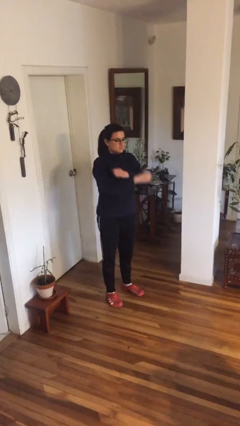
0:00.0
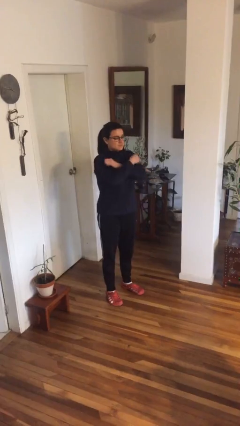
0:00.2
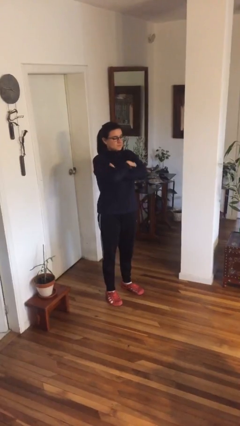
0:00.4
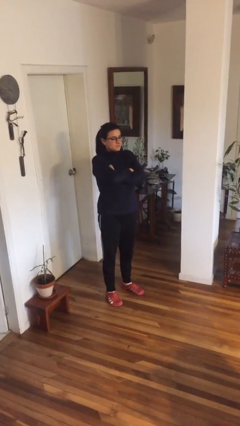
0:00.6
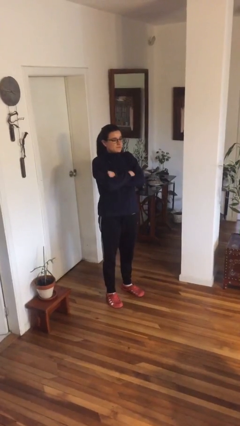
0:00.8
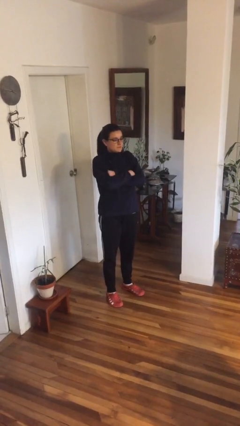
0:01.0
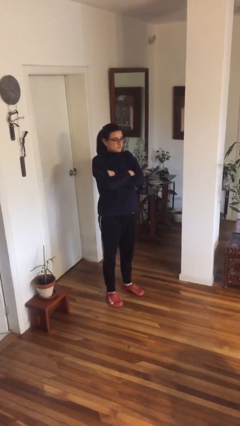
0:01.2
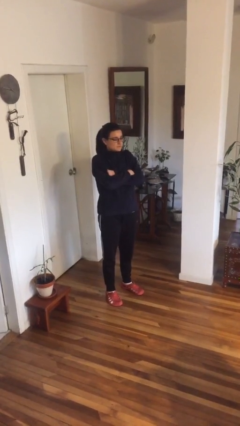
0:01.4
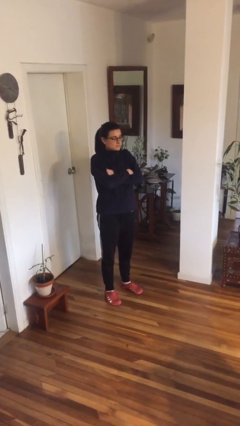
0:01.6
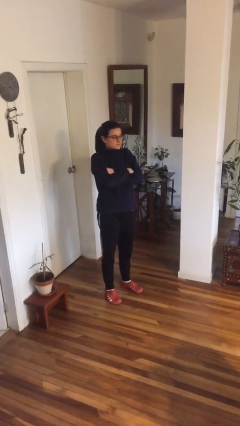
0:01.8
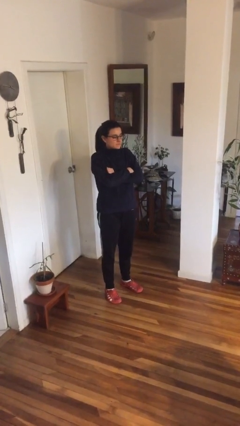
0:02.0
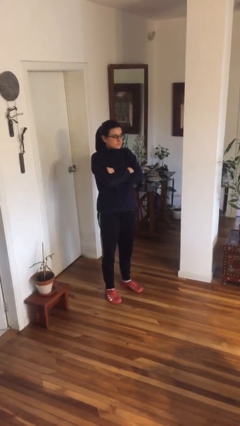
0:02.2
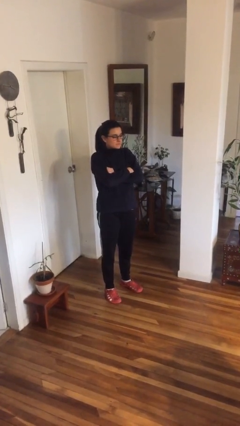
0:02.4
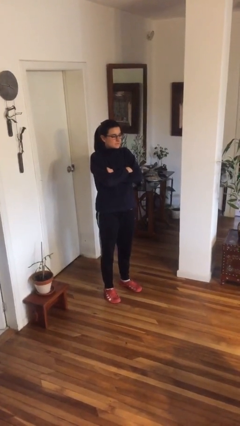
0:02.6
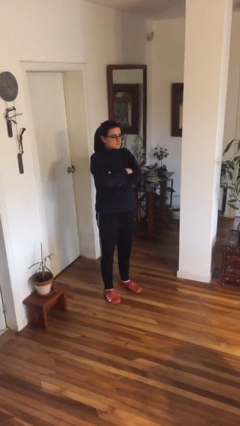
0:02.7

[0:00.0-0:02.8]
person crosses arms

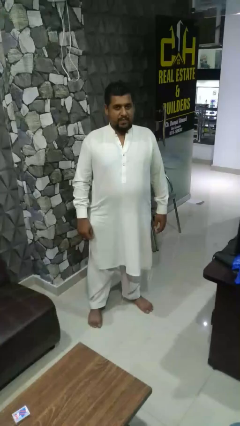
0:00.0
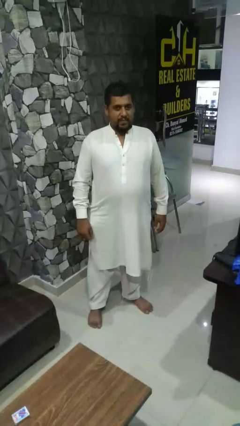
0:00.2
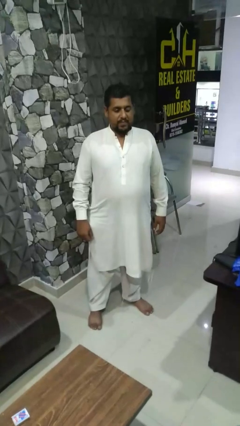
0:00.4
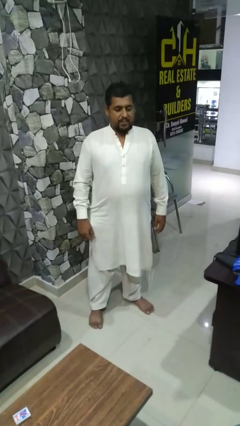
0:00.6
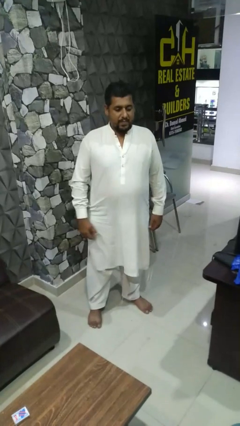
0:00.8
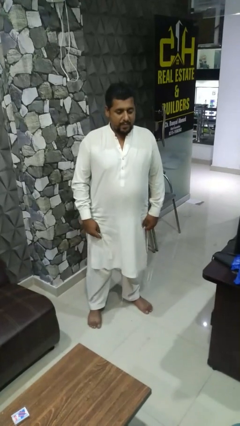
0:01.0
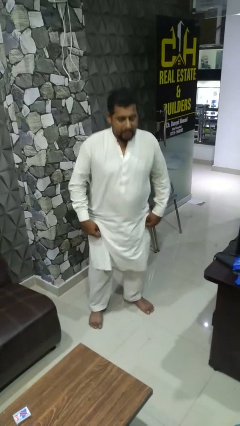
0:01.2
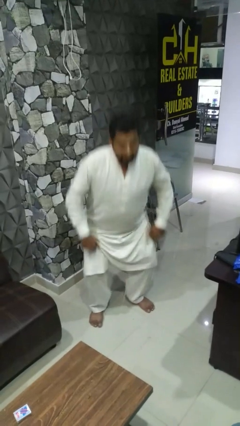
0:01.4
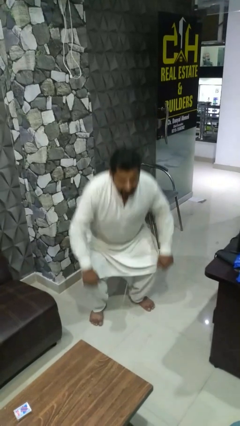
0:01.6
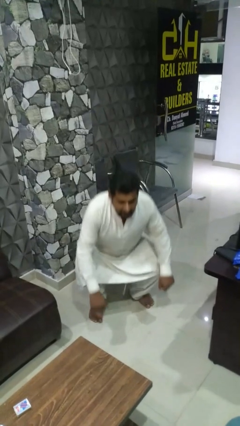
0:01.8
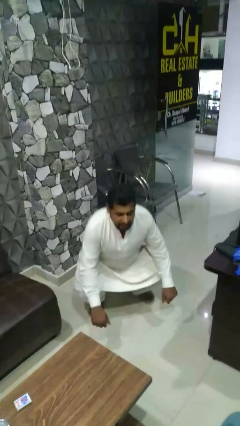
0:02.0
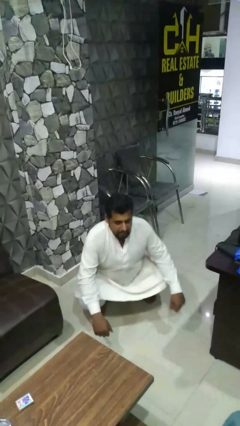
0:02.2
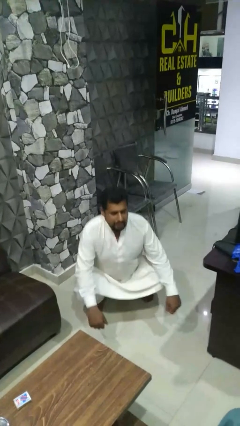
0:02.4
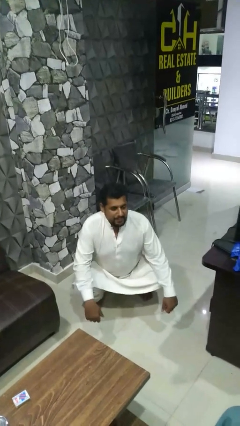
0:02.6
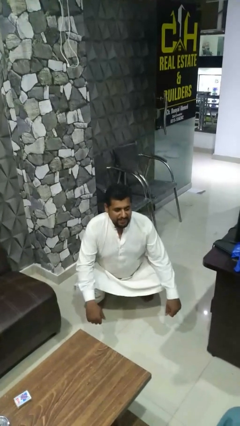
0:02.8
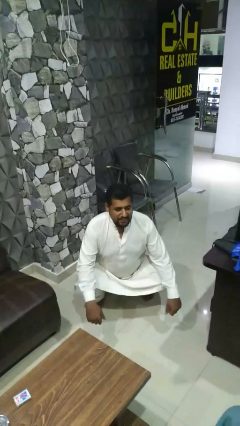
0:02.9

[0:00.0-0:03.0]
person squats

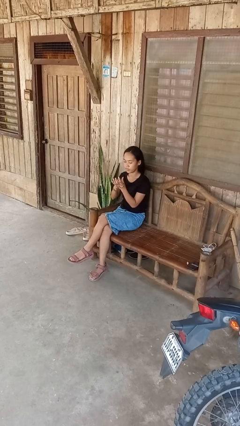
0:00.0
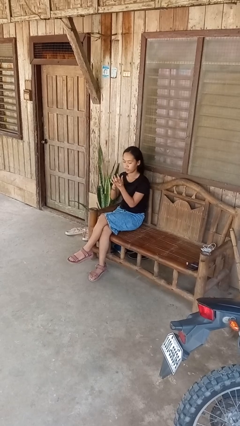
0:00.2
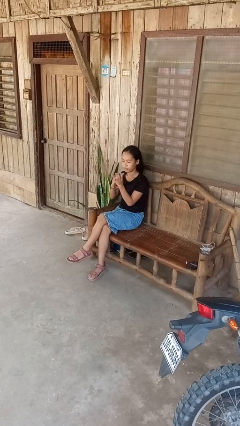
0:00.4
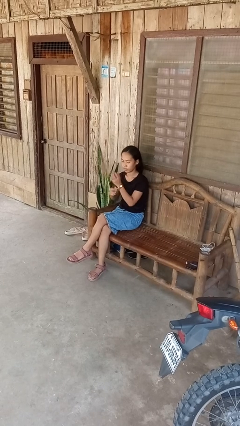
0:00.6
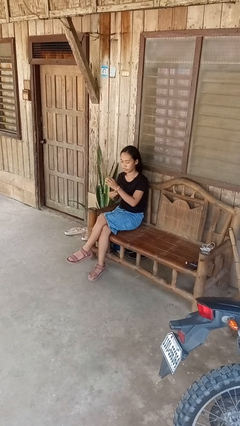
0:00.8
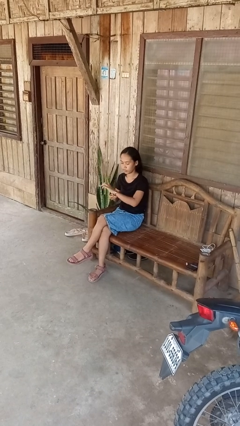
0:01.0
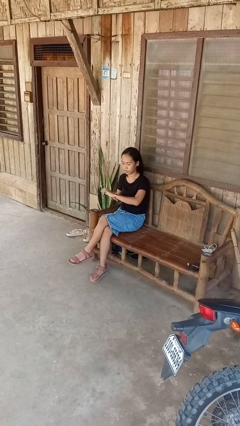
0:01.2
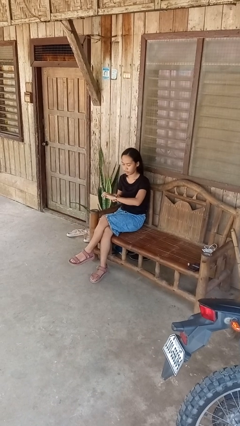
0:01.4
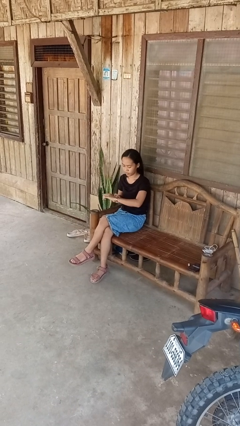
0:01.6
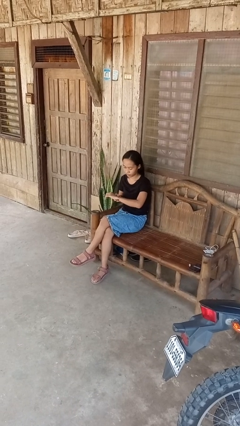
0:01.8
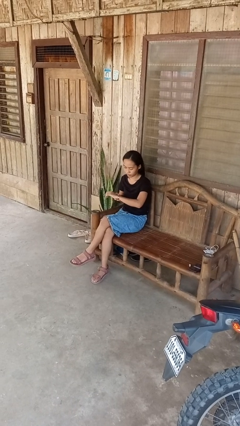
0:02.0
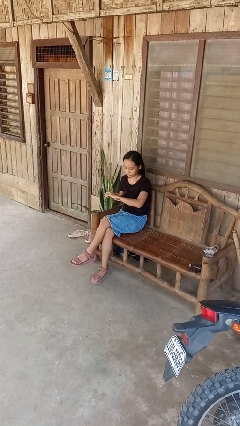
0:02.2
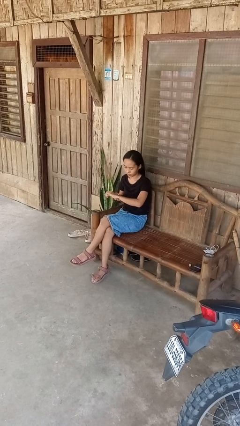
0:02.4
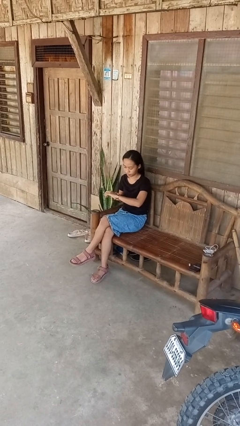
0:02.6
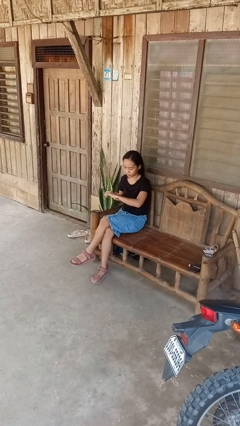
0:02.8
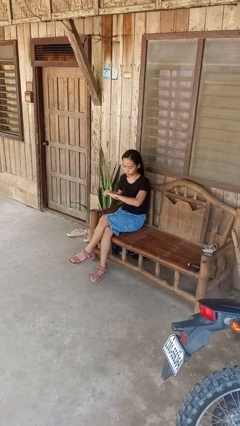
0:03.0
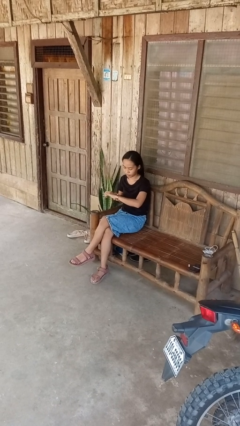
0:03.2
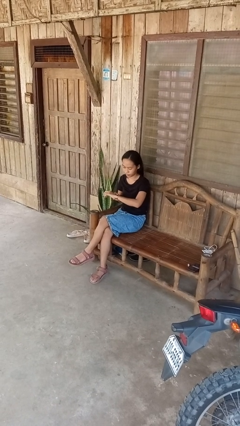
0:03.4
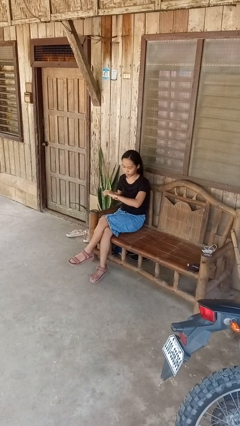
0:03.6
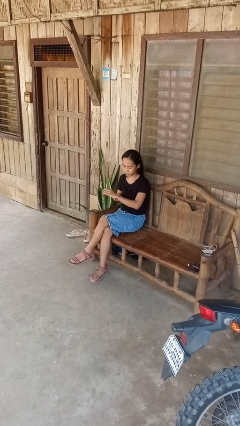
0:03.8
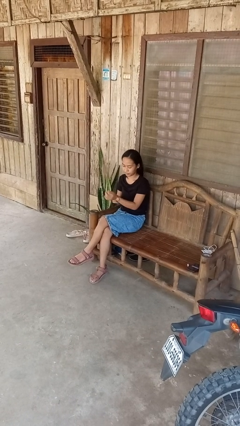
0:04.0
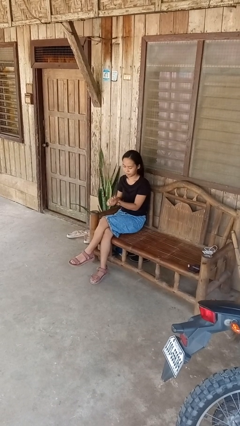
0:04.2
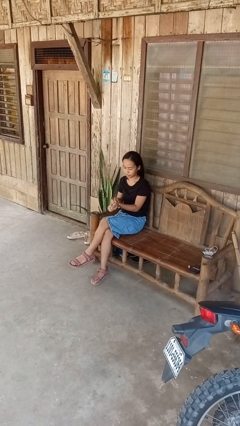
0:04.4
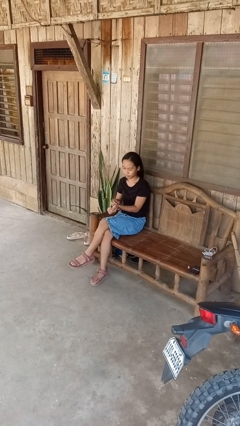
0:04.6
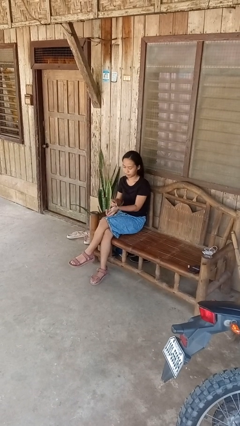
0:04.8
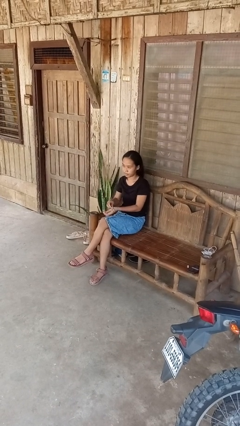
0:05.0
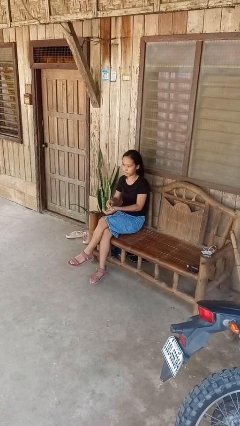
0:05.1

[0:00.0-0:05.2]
person puts on wristwatch

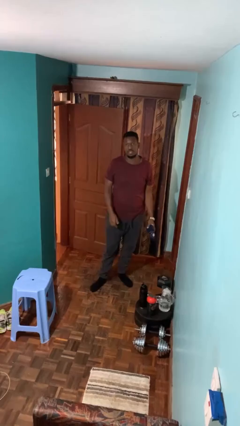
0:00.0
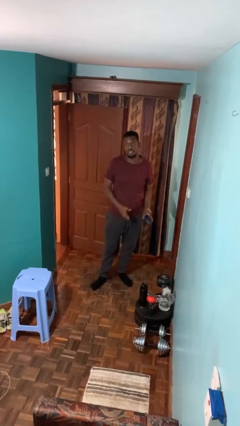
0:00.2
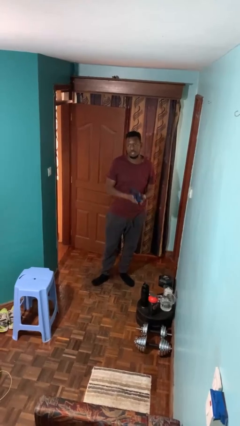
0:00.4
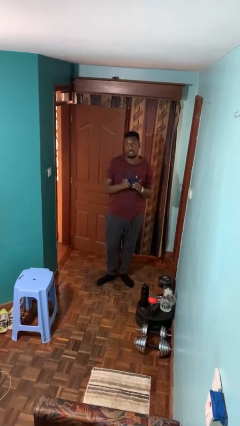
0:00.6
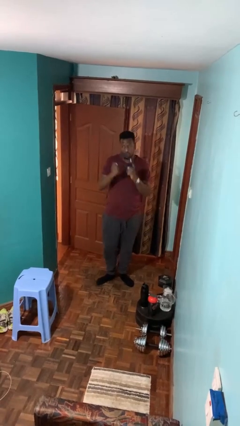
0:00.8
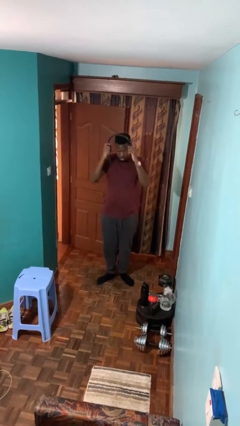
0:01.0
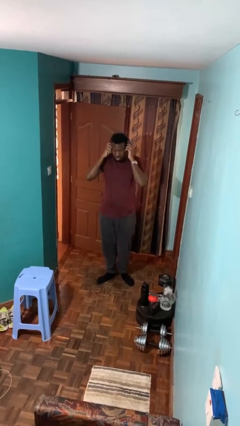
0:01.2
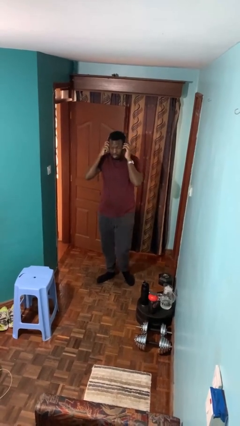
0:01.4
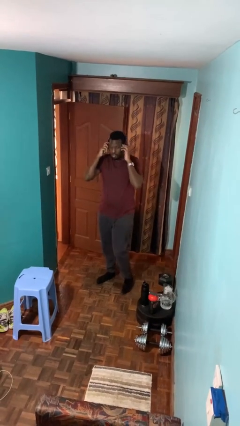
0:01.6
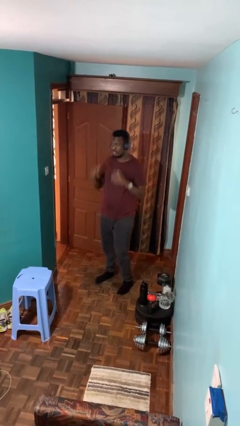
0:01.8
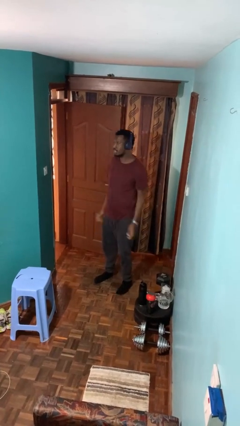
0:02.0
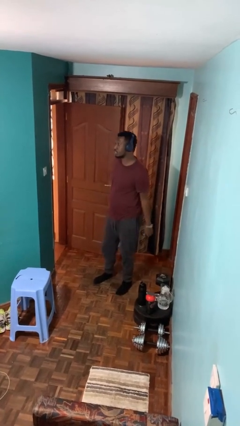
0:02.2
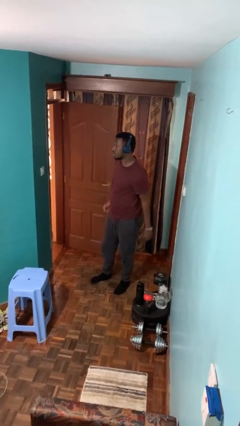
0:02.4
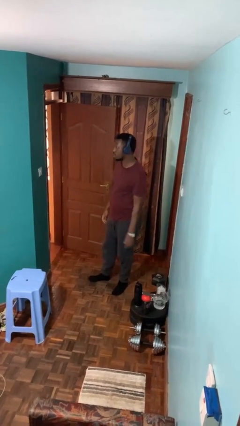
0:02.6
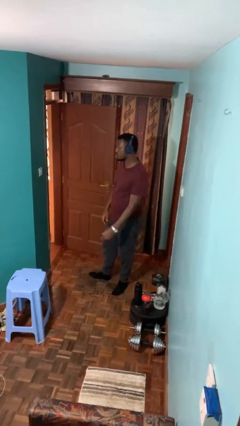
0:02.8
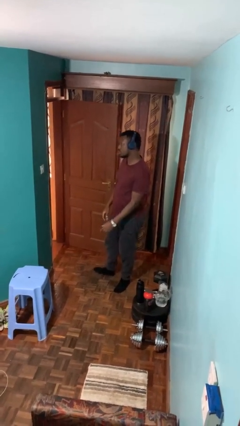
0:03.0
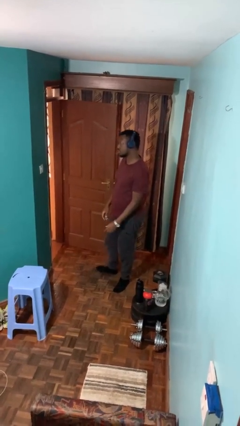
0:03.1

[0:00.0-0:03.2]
person puts on headphones

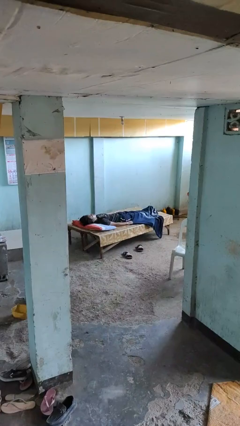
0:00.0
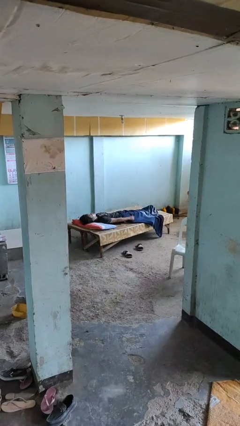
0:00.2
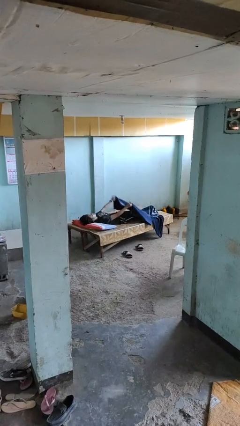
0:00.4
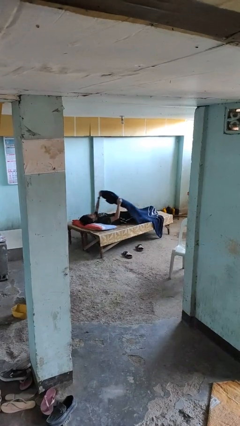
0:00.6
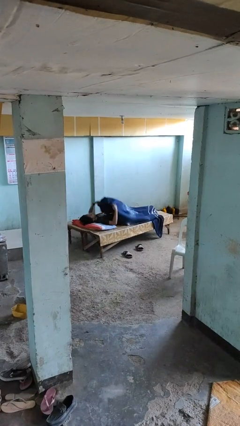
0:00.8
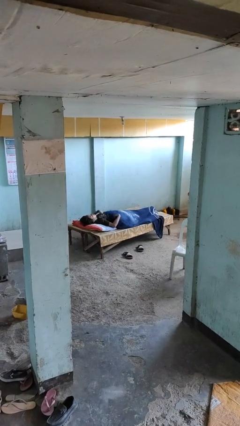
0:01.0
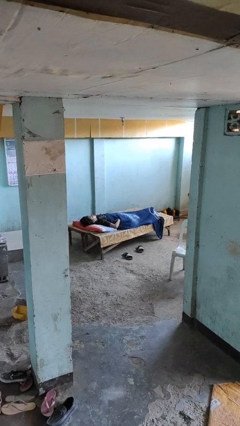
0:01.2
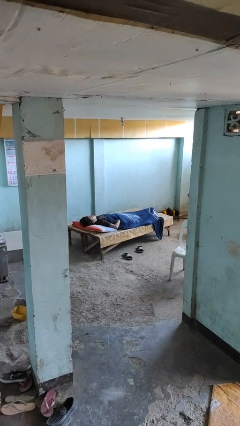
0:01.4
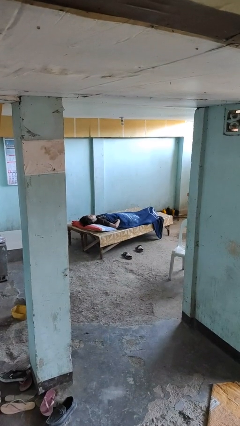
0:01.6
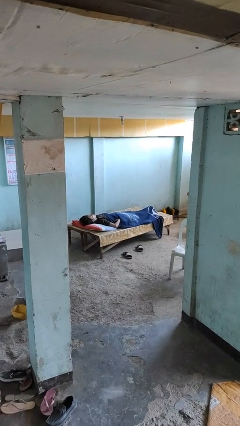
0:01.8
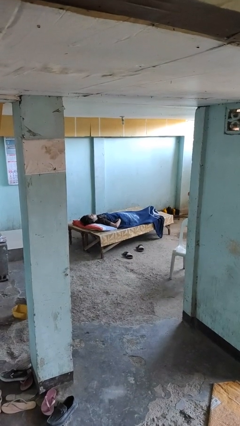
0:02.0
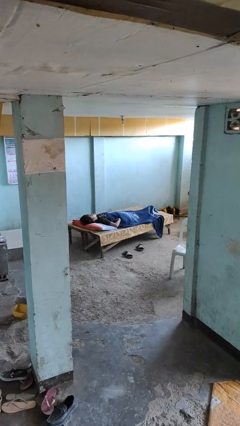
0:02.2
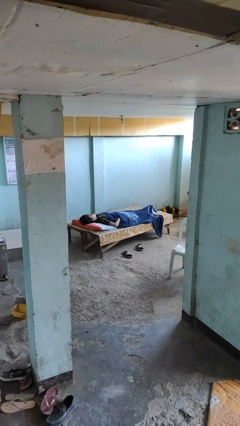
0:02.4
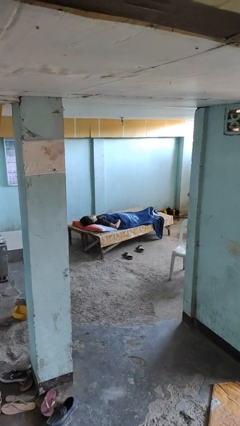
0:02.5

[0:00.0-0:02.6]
person covers with blanket

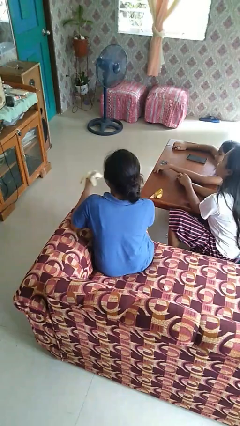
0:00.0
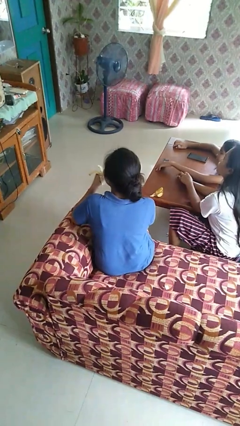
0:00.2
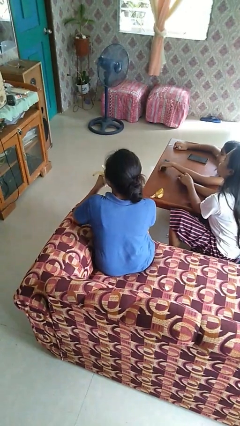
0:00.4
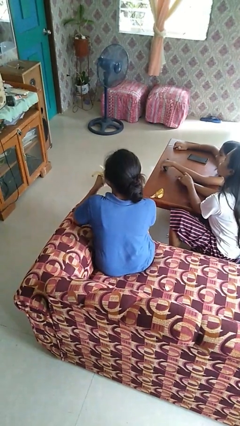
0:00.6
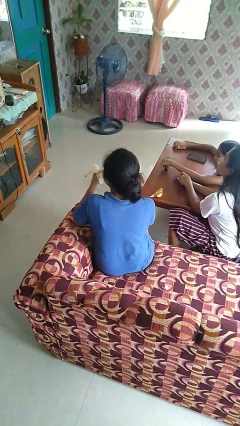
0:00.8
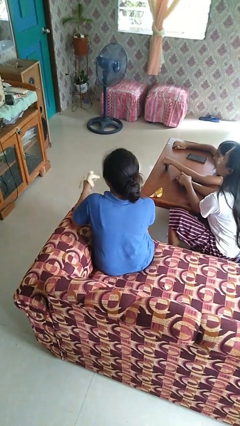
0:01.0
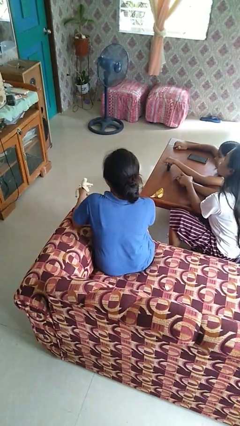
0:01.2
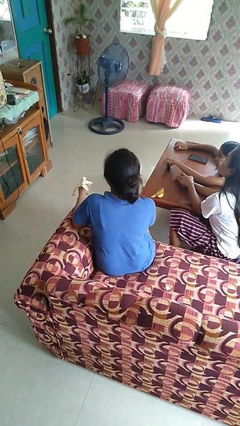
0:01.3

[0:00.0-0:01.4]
person eats banana
